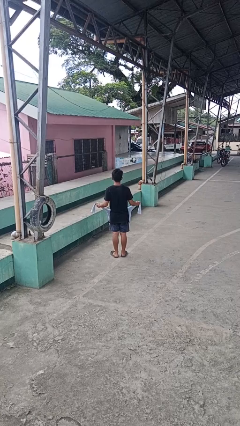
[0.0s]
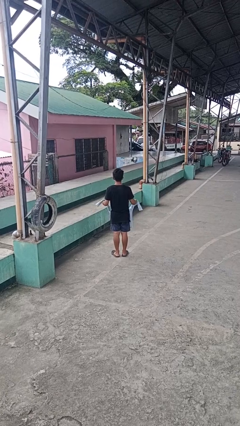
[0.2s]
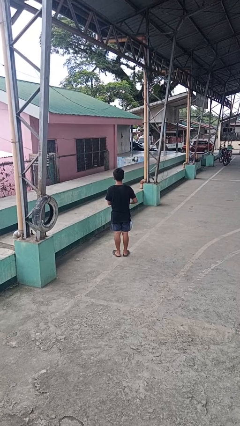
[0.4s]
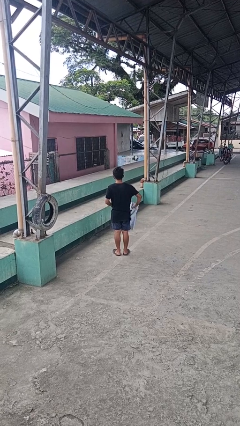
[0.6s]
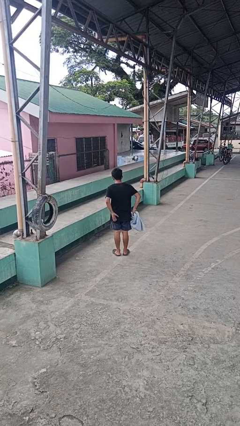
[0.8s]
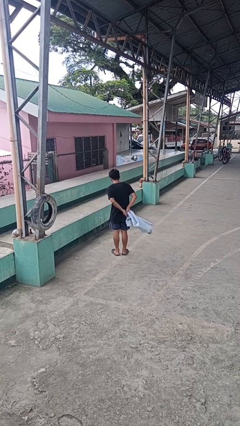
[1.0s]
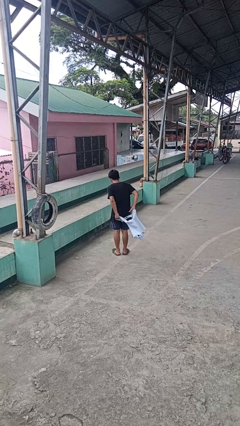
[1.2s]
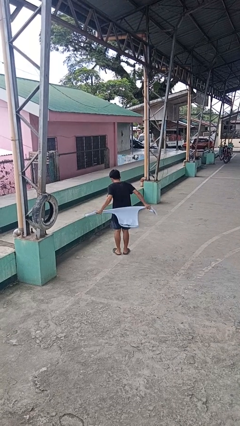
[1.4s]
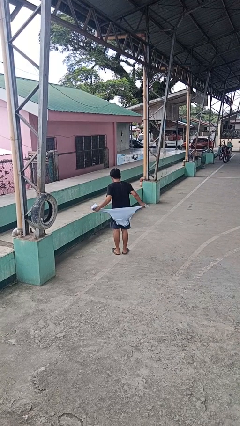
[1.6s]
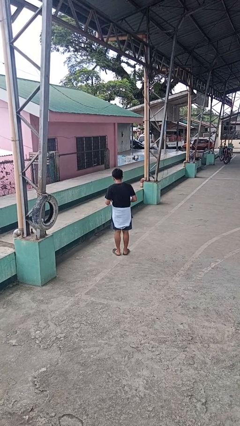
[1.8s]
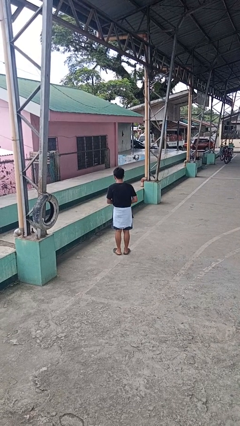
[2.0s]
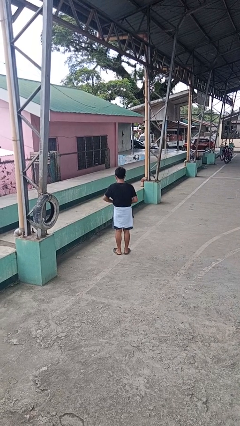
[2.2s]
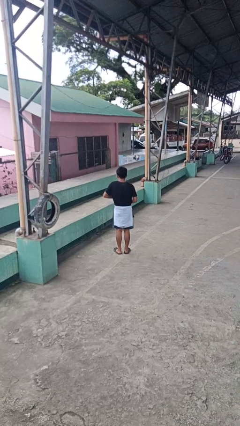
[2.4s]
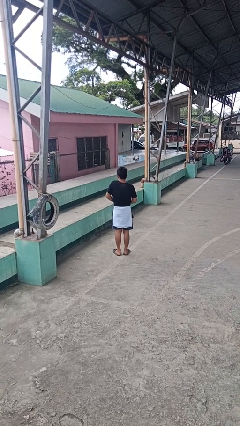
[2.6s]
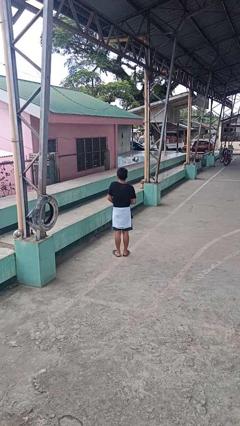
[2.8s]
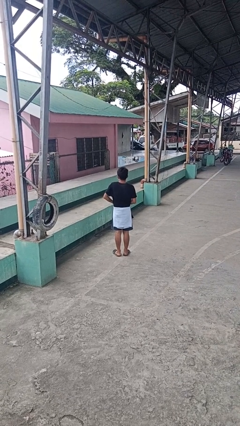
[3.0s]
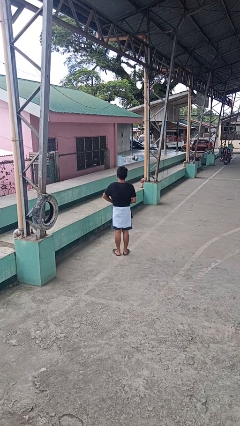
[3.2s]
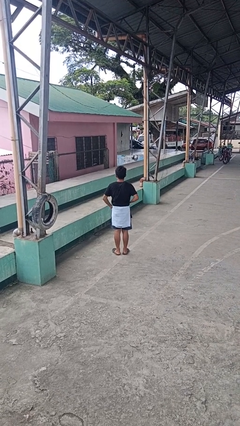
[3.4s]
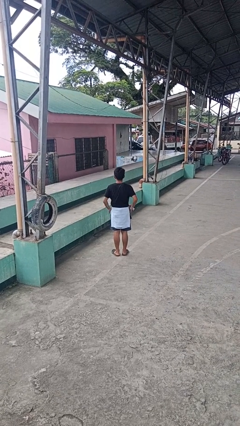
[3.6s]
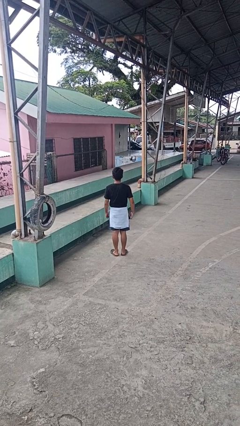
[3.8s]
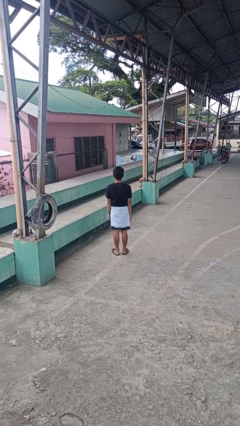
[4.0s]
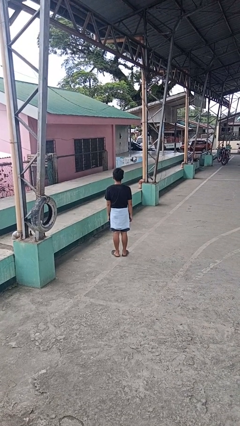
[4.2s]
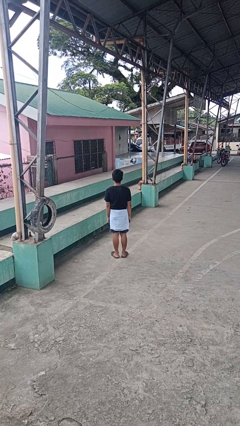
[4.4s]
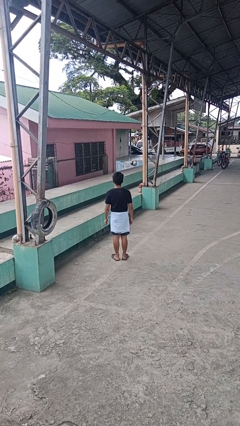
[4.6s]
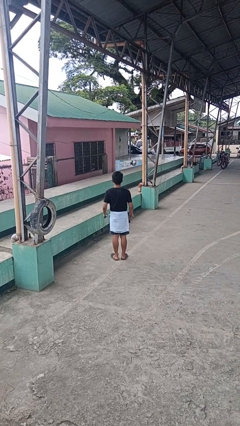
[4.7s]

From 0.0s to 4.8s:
person ties jacket around waist

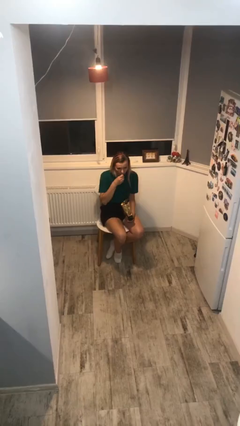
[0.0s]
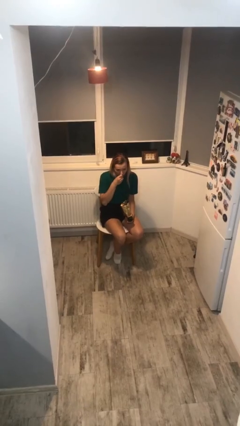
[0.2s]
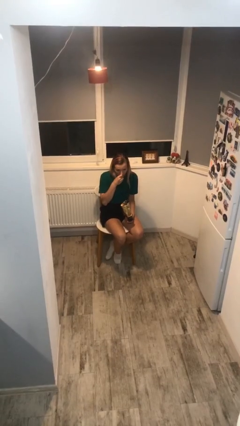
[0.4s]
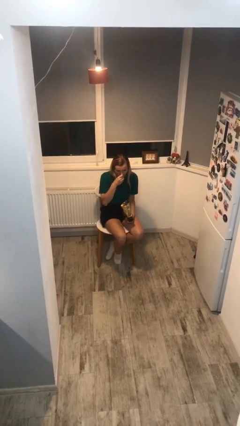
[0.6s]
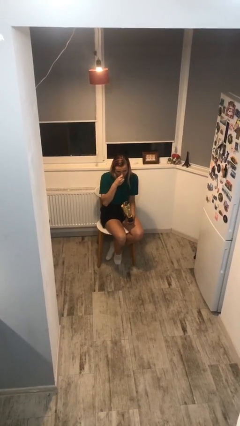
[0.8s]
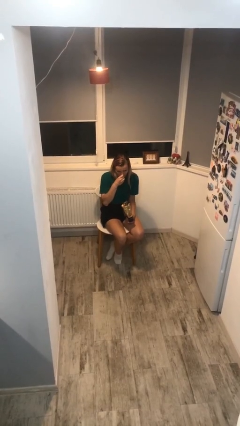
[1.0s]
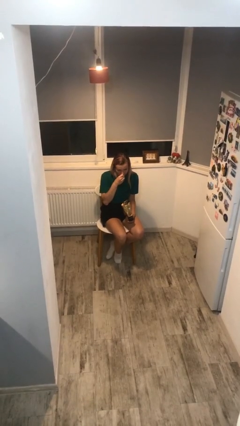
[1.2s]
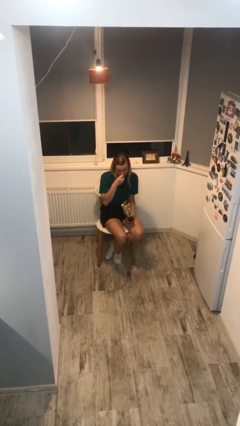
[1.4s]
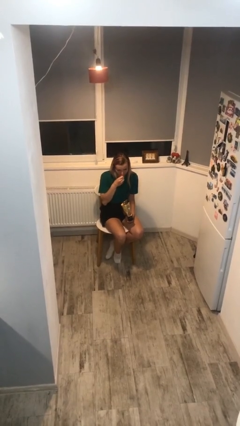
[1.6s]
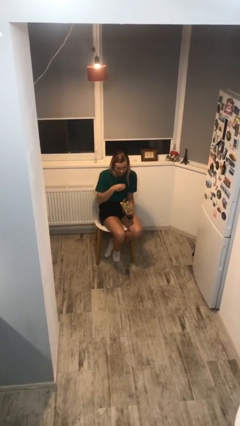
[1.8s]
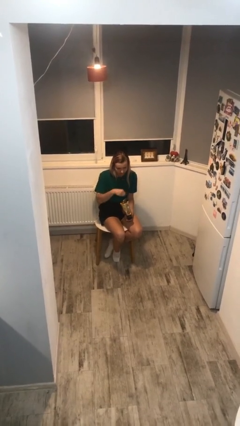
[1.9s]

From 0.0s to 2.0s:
person eats snack from bag

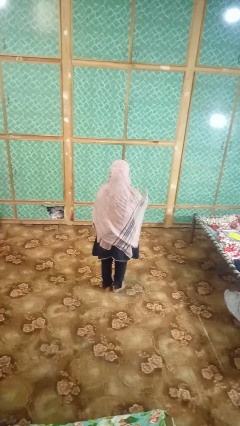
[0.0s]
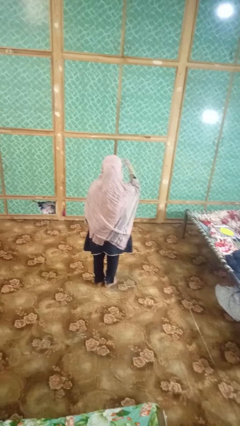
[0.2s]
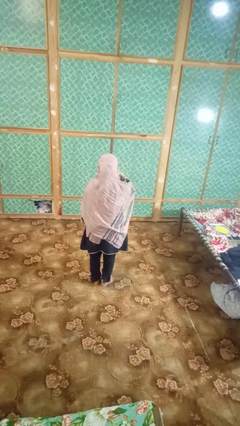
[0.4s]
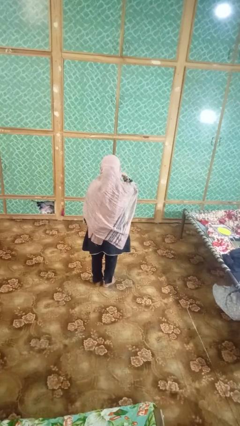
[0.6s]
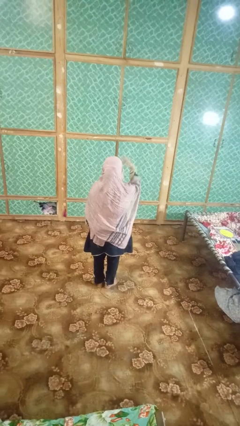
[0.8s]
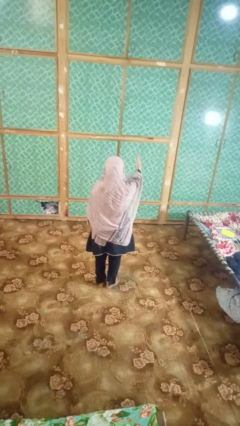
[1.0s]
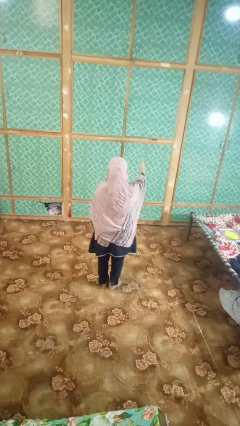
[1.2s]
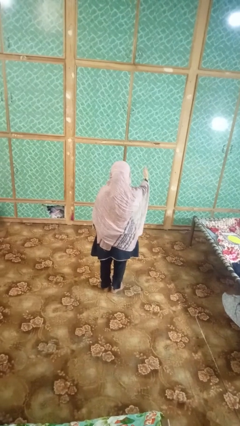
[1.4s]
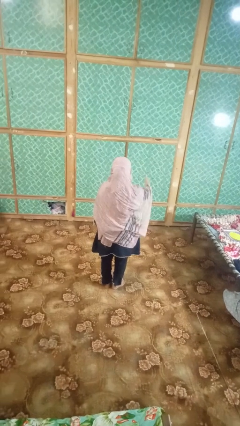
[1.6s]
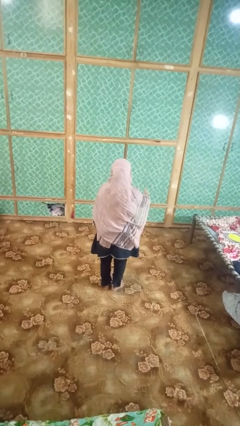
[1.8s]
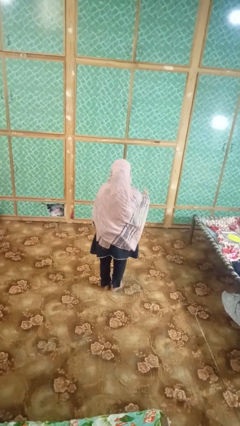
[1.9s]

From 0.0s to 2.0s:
person gestures blow kiss

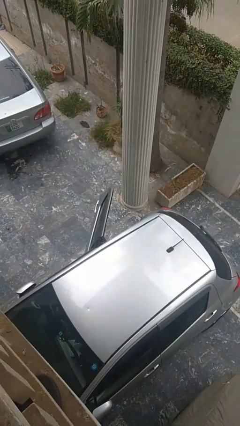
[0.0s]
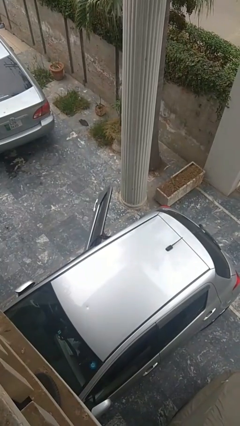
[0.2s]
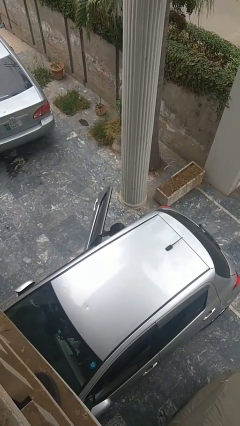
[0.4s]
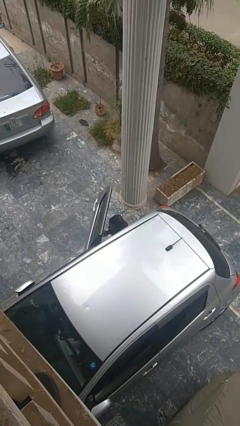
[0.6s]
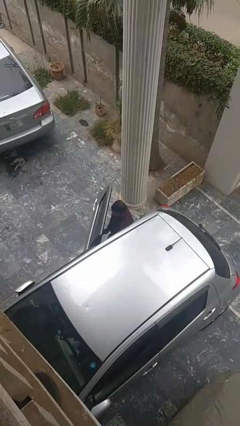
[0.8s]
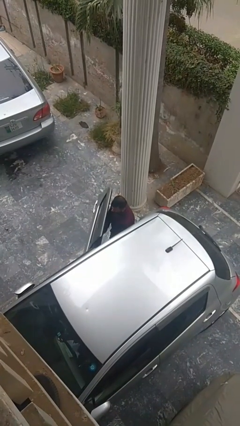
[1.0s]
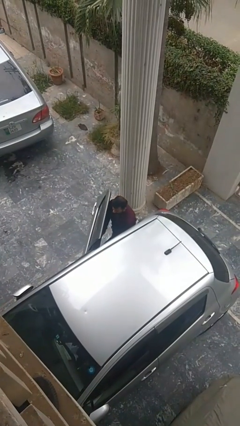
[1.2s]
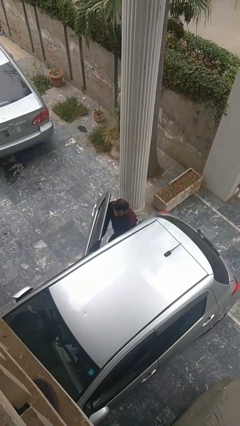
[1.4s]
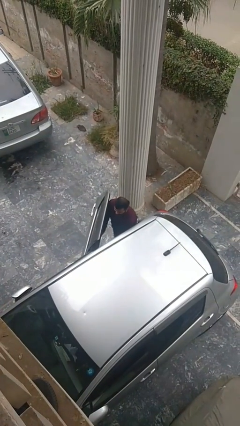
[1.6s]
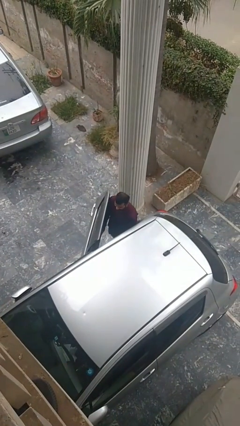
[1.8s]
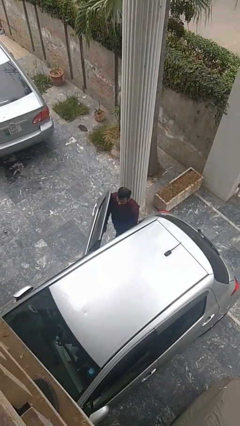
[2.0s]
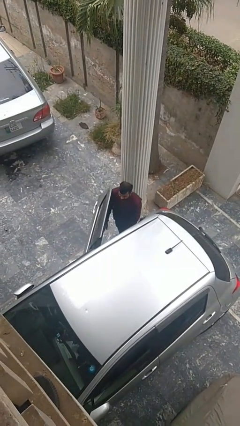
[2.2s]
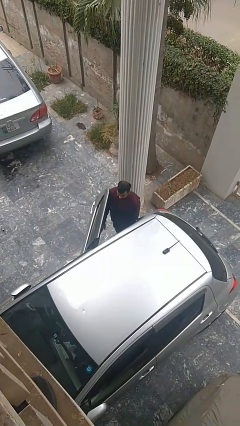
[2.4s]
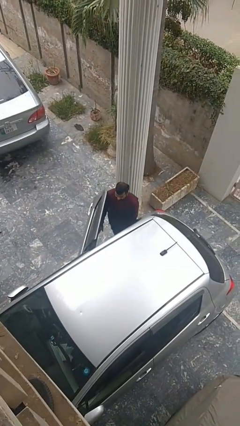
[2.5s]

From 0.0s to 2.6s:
person exits car

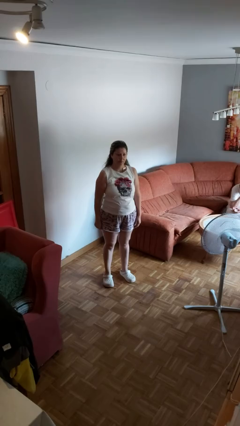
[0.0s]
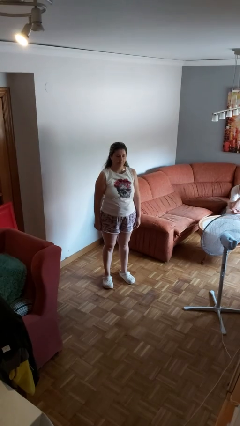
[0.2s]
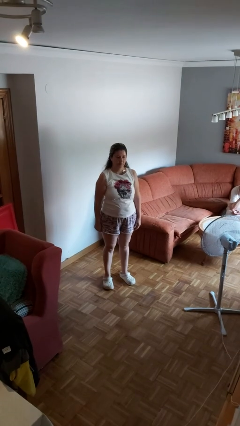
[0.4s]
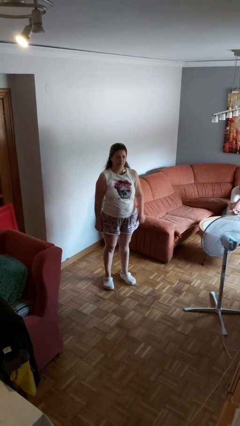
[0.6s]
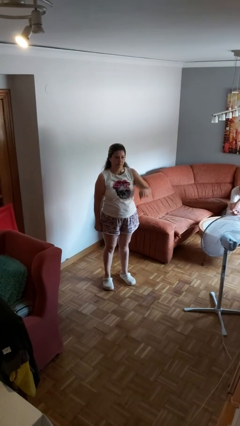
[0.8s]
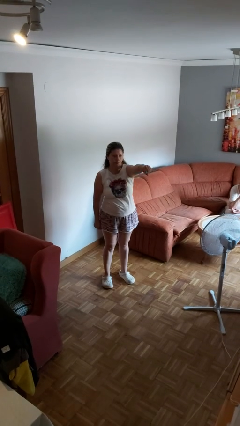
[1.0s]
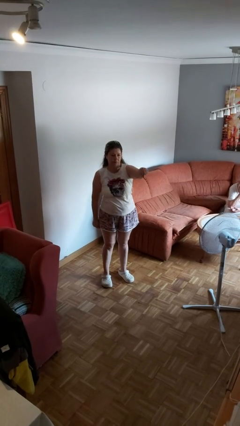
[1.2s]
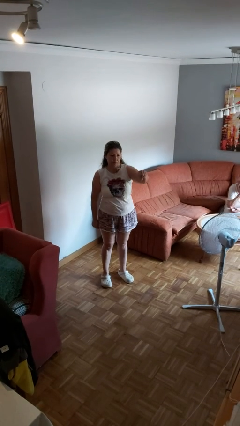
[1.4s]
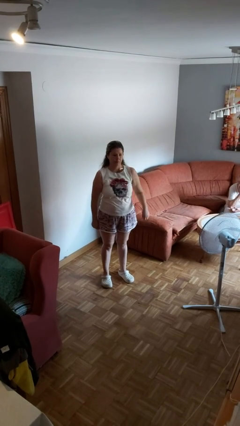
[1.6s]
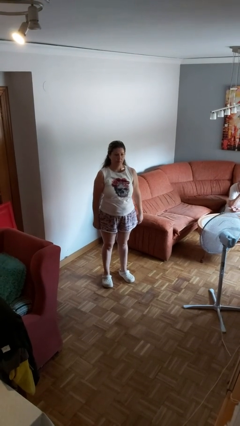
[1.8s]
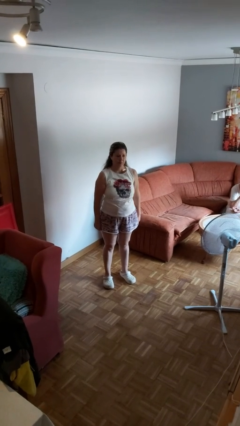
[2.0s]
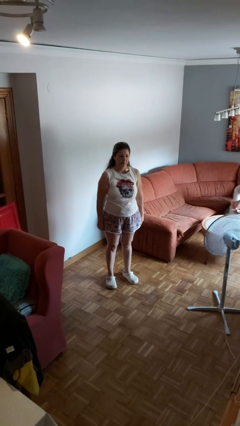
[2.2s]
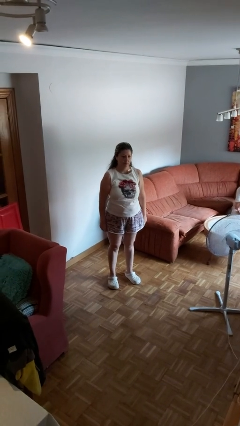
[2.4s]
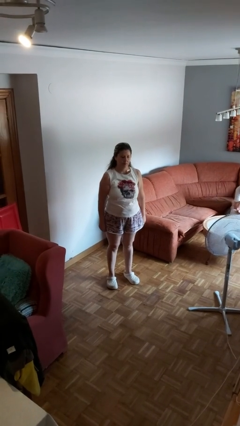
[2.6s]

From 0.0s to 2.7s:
person punches

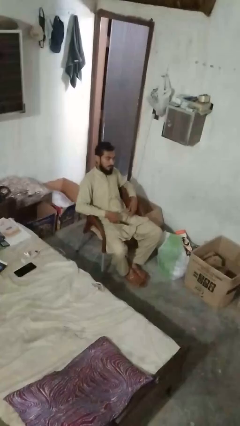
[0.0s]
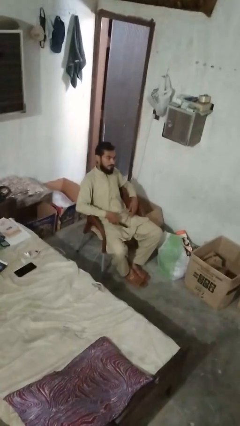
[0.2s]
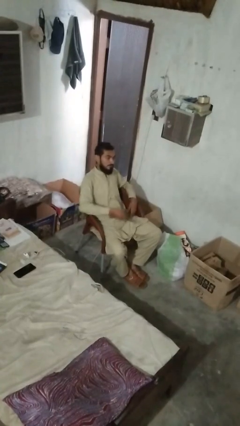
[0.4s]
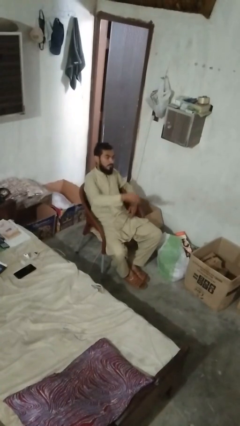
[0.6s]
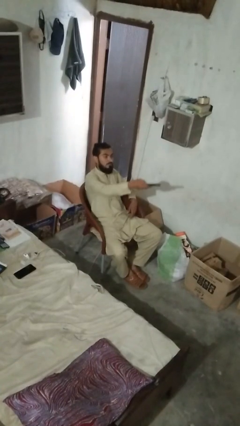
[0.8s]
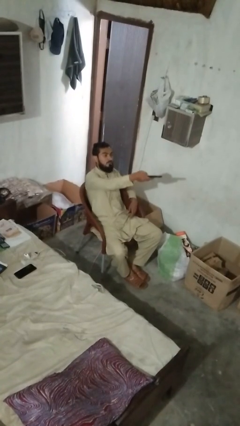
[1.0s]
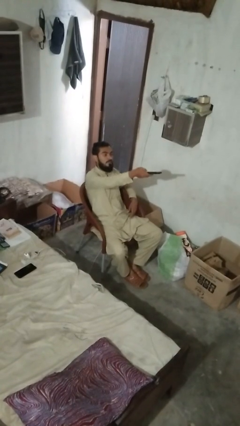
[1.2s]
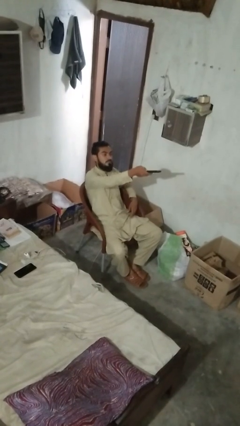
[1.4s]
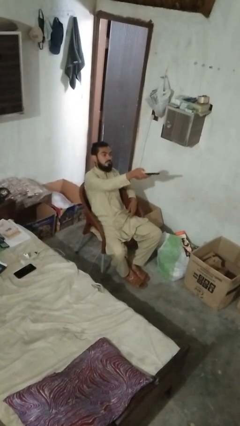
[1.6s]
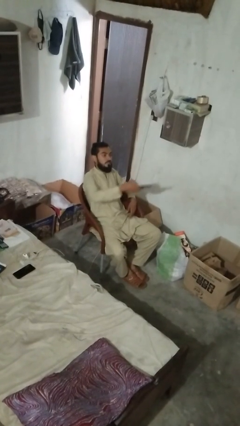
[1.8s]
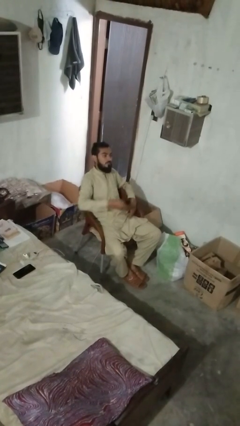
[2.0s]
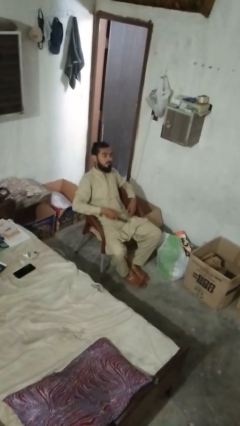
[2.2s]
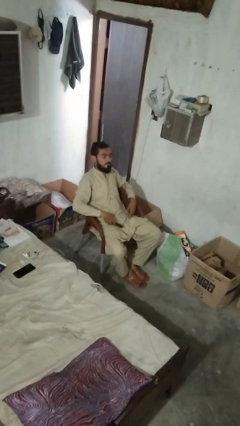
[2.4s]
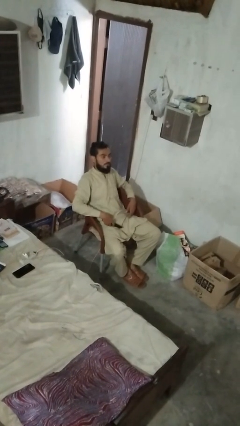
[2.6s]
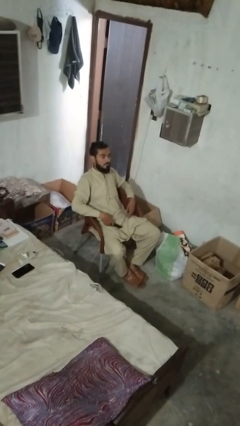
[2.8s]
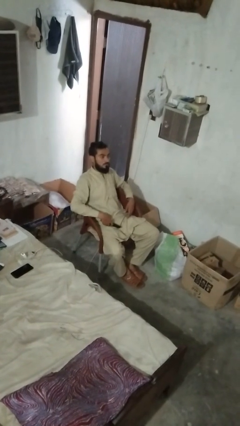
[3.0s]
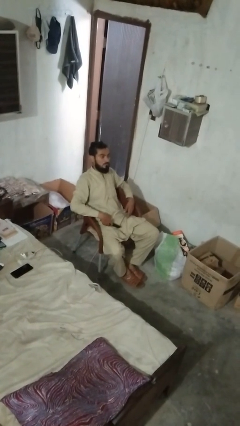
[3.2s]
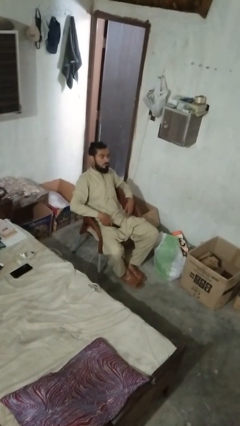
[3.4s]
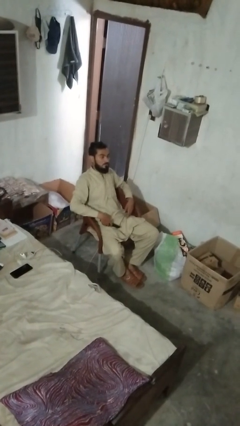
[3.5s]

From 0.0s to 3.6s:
person uses television remote
